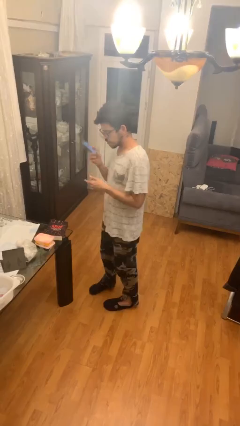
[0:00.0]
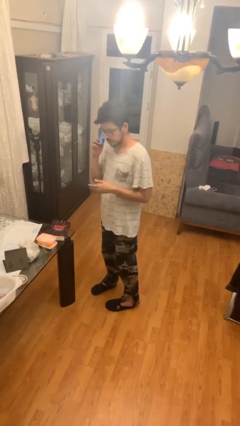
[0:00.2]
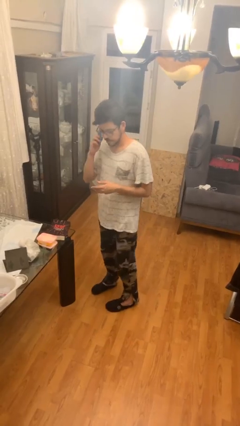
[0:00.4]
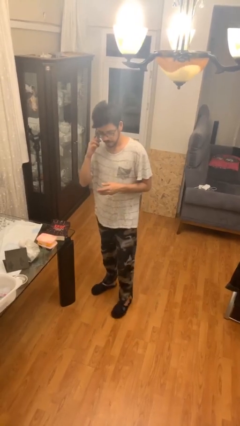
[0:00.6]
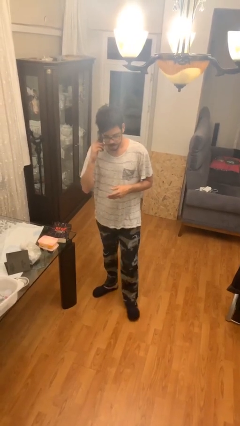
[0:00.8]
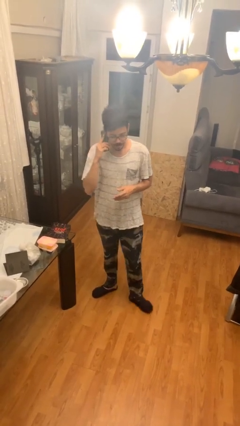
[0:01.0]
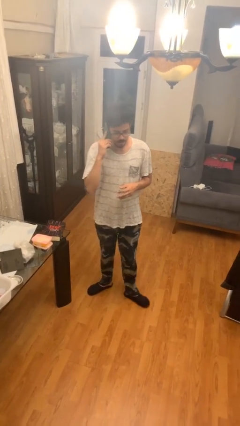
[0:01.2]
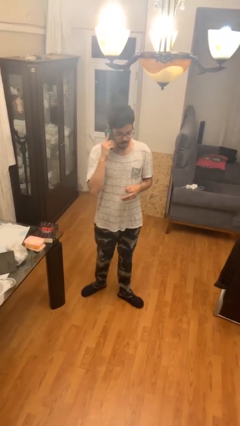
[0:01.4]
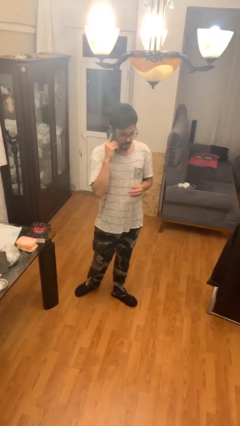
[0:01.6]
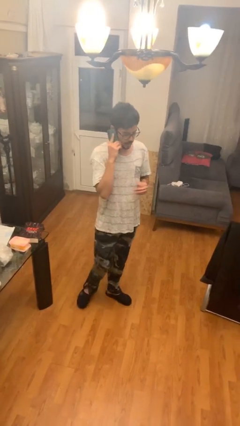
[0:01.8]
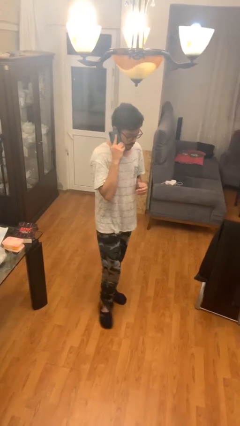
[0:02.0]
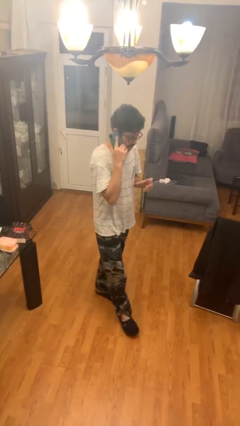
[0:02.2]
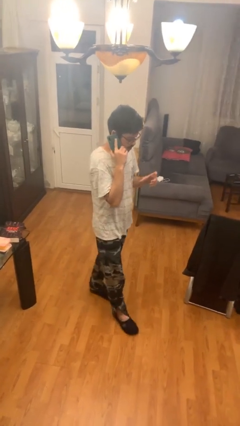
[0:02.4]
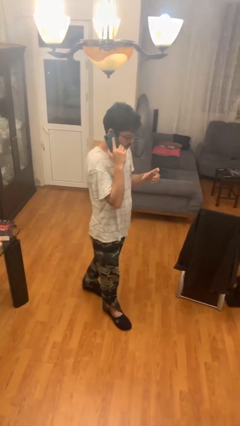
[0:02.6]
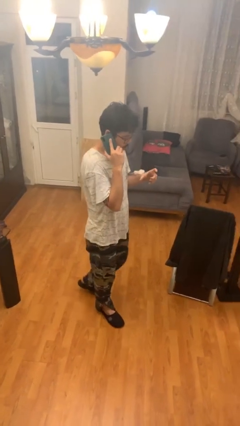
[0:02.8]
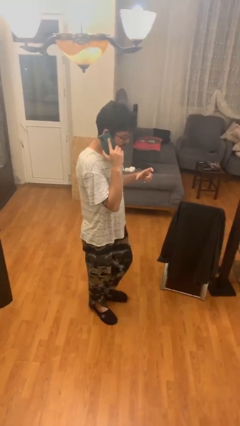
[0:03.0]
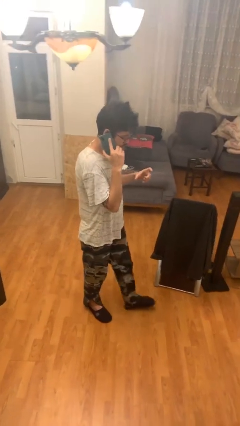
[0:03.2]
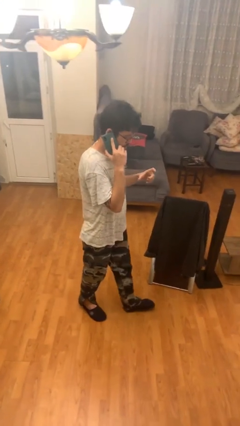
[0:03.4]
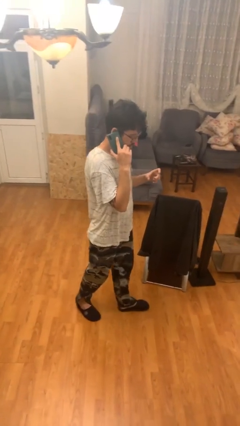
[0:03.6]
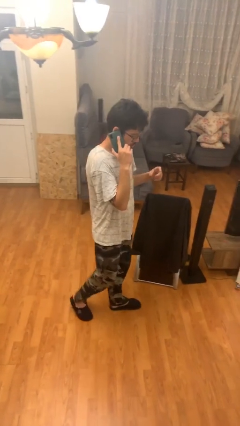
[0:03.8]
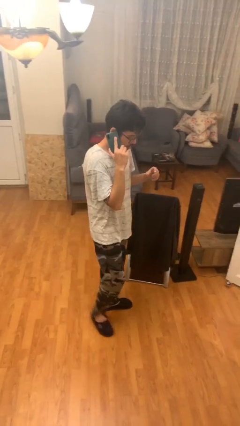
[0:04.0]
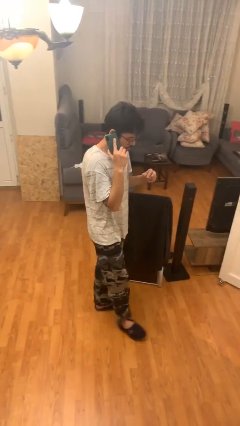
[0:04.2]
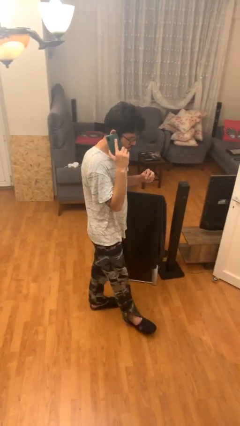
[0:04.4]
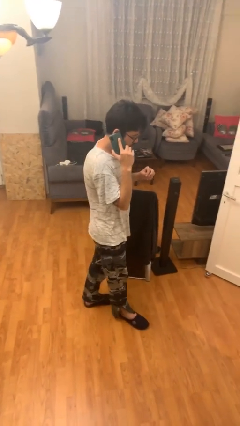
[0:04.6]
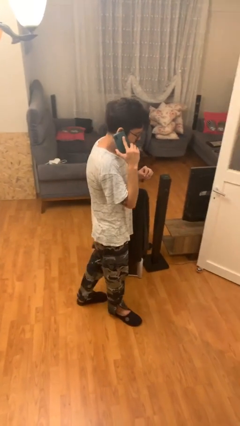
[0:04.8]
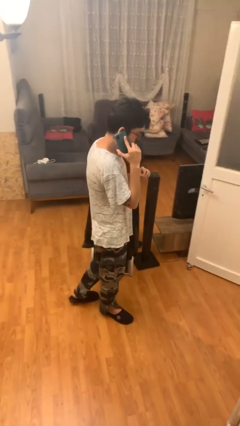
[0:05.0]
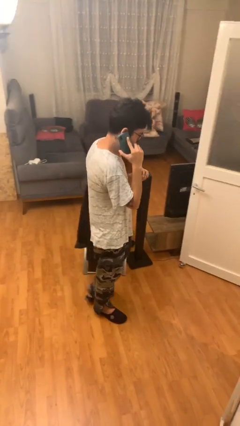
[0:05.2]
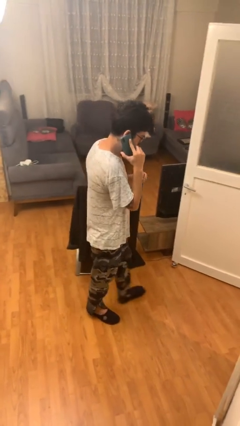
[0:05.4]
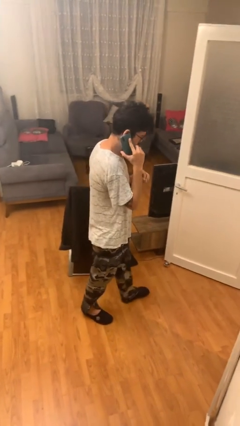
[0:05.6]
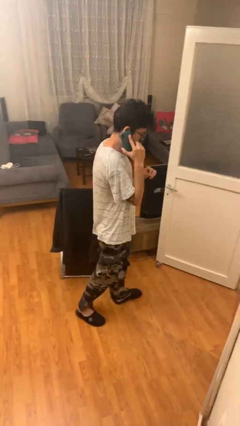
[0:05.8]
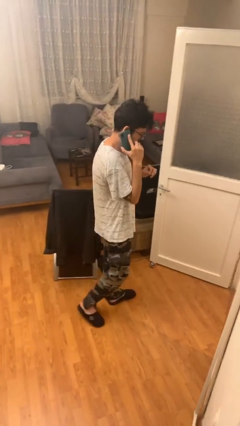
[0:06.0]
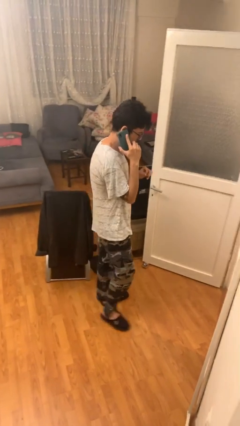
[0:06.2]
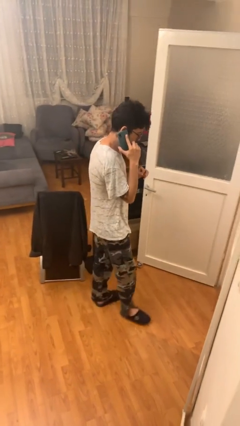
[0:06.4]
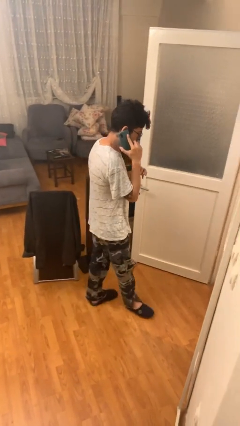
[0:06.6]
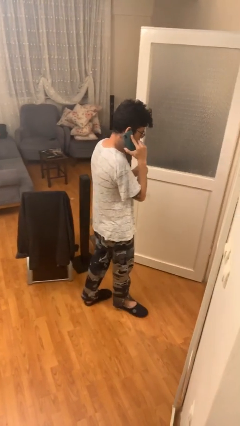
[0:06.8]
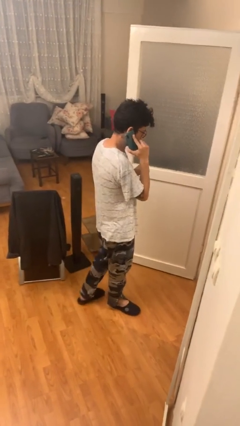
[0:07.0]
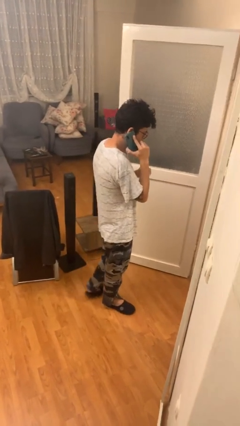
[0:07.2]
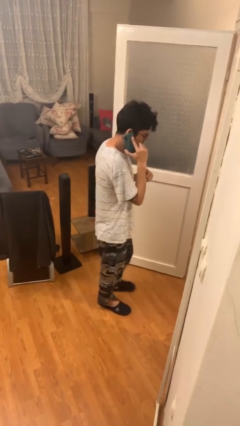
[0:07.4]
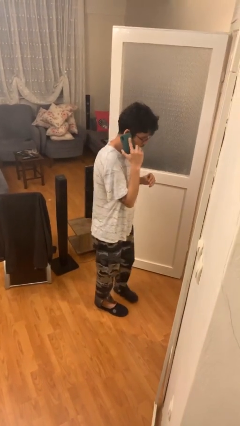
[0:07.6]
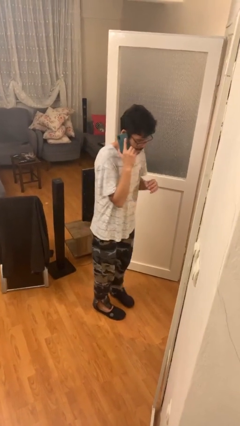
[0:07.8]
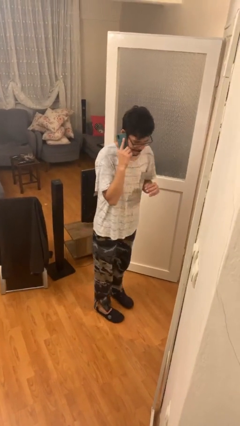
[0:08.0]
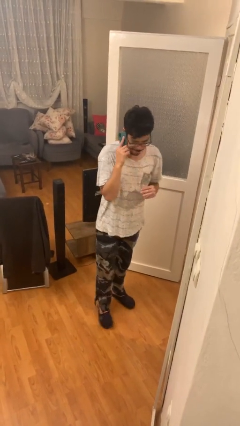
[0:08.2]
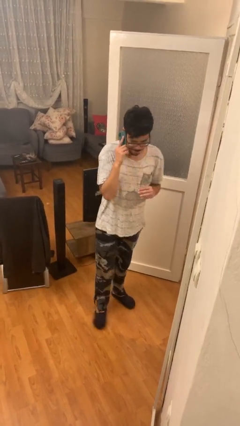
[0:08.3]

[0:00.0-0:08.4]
person talks on phone

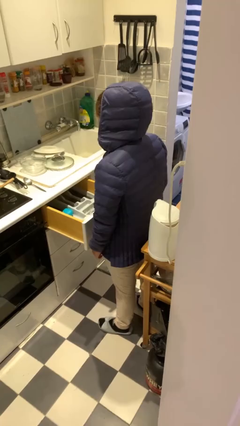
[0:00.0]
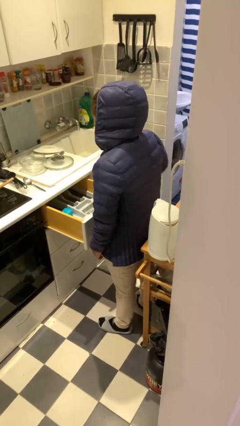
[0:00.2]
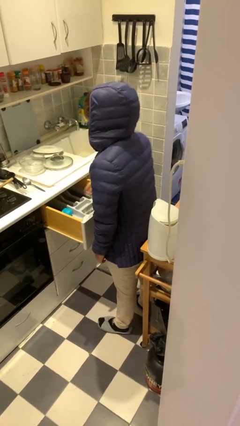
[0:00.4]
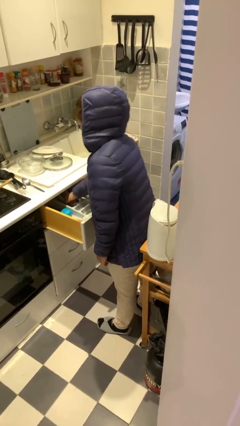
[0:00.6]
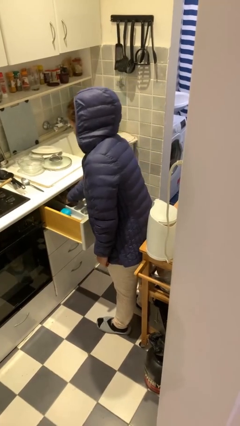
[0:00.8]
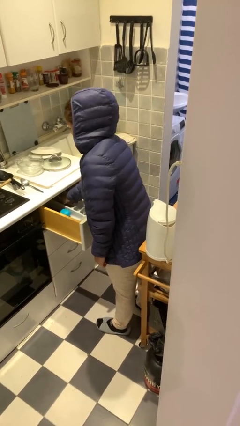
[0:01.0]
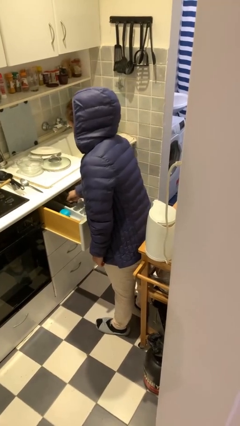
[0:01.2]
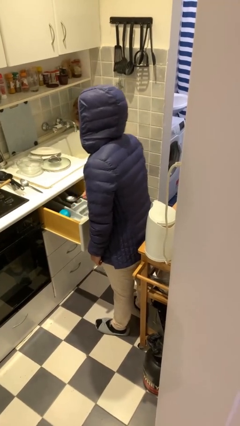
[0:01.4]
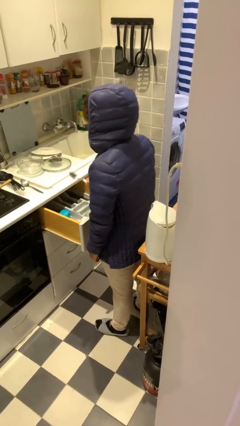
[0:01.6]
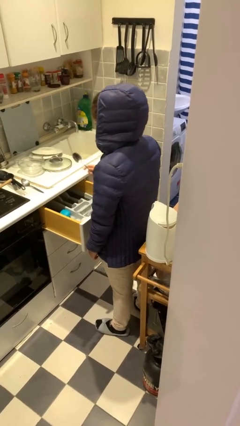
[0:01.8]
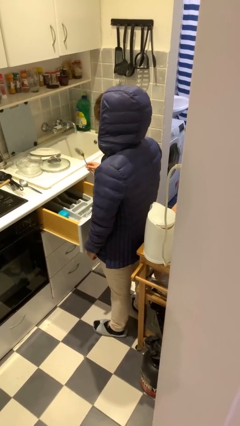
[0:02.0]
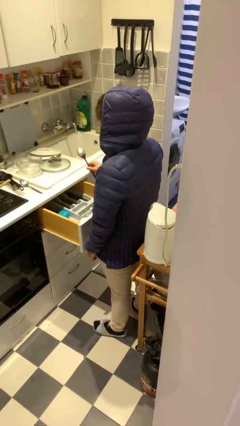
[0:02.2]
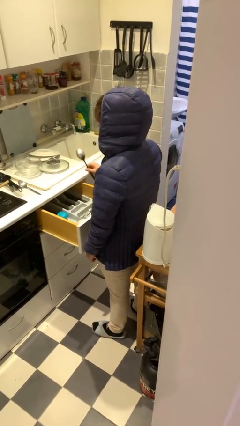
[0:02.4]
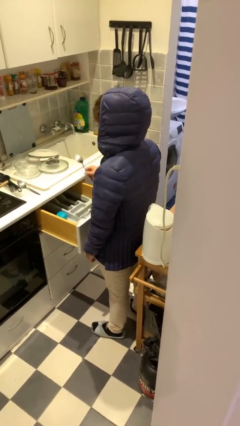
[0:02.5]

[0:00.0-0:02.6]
person takes object from kitchen drawer

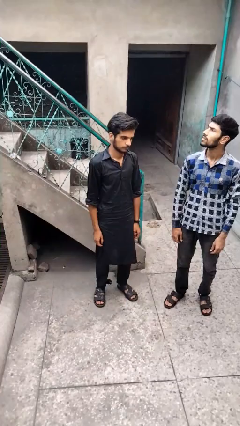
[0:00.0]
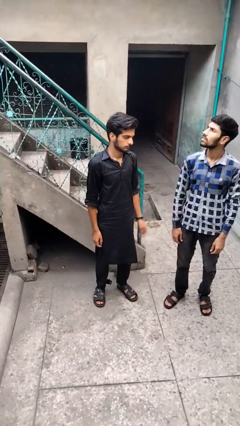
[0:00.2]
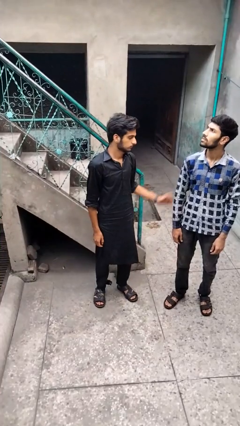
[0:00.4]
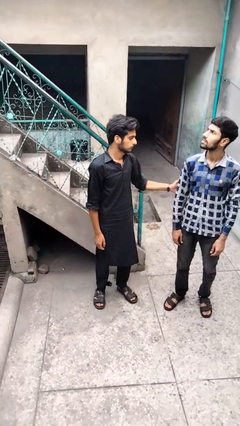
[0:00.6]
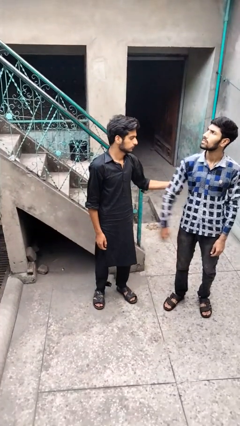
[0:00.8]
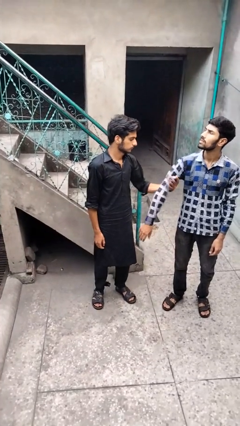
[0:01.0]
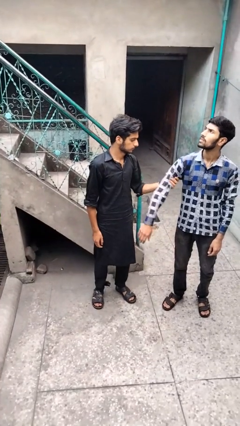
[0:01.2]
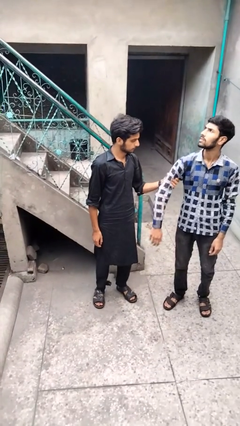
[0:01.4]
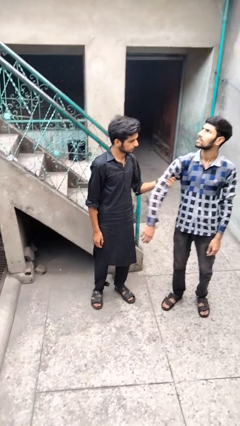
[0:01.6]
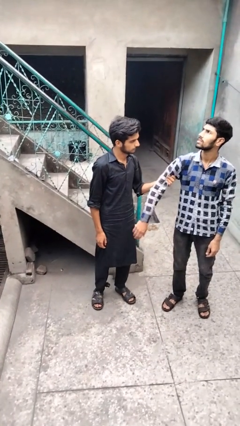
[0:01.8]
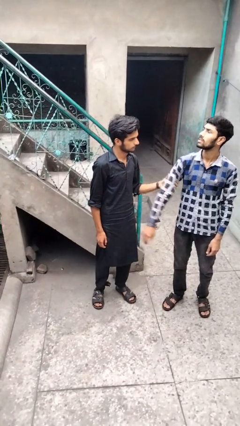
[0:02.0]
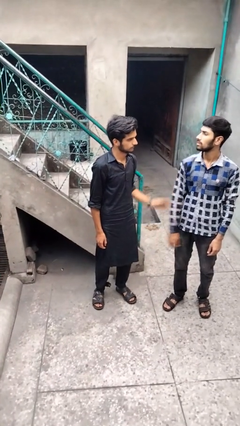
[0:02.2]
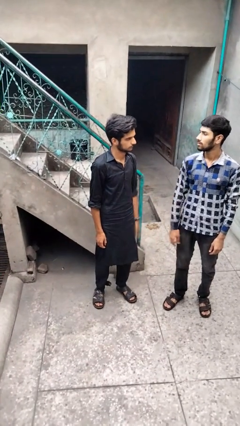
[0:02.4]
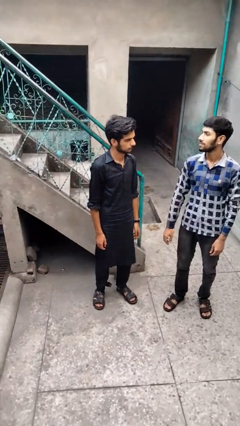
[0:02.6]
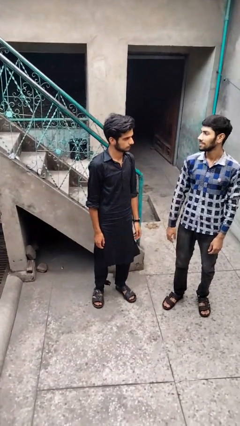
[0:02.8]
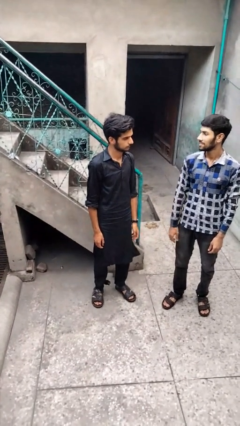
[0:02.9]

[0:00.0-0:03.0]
person grabs person by bicep

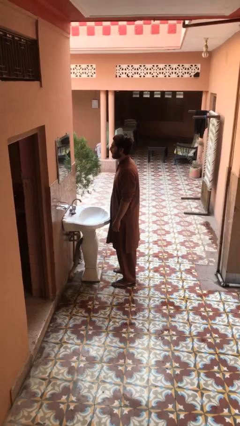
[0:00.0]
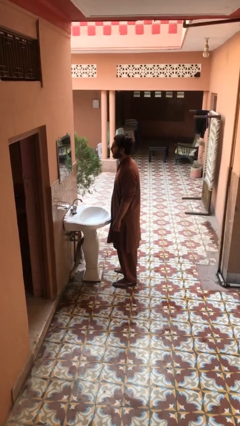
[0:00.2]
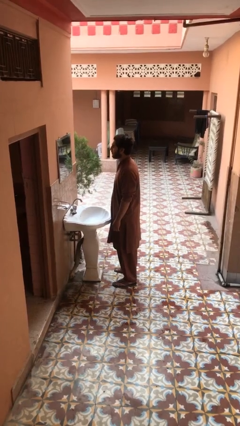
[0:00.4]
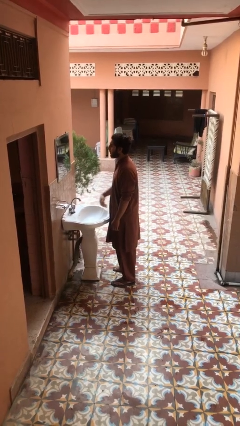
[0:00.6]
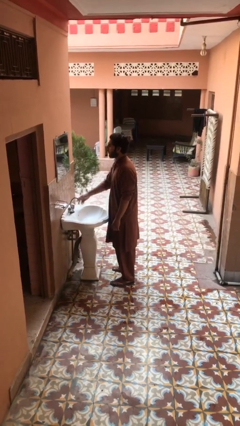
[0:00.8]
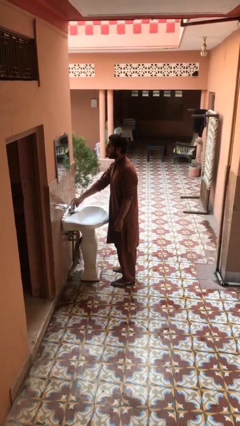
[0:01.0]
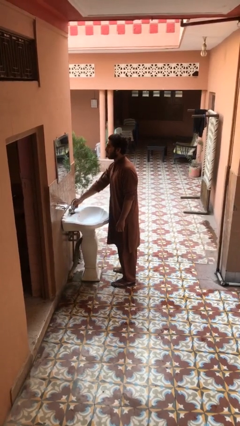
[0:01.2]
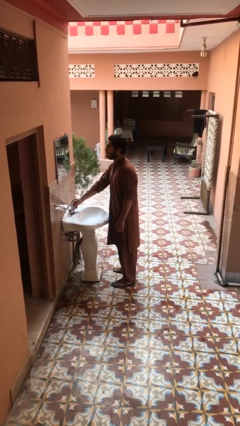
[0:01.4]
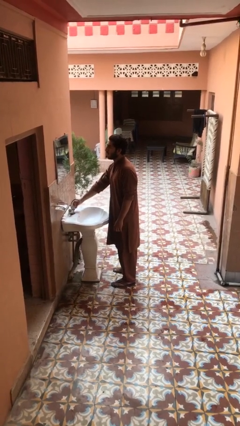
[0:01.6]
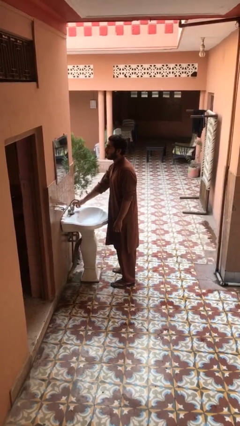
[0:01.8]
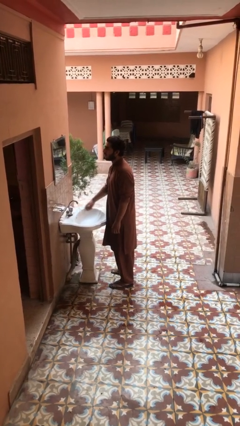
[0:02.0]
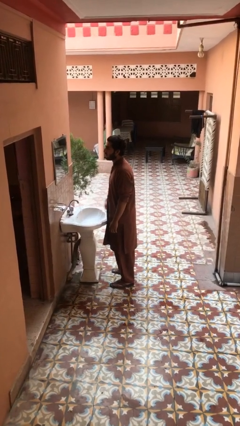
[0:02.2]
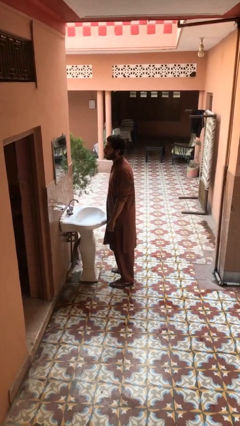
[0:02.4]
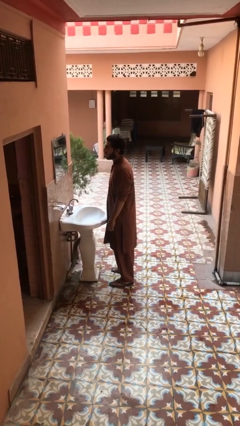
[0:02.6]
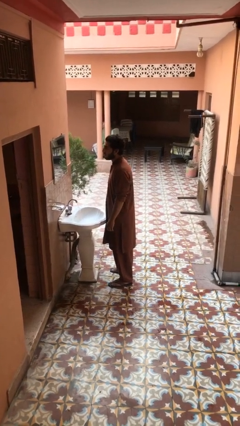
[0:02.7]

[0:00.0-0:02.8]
person turns on faucet

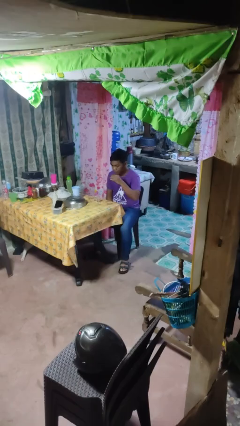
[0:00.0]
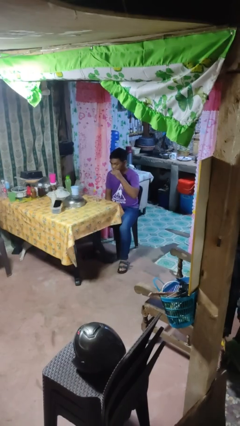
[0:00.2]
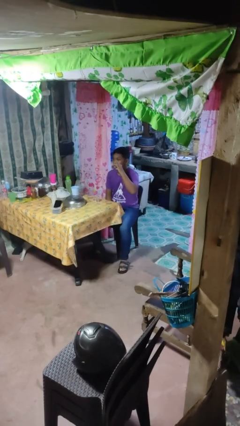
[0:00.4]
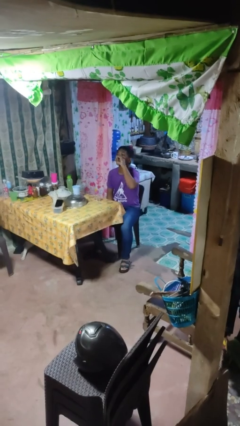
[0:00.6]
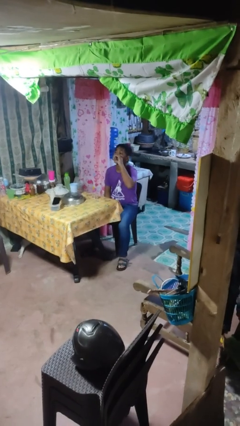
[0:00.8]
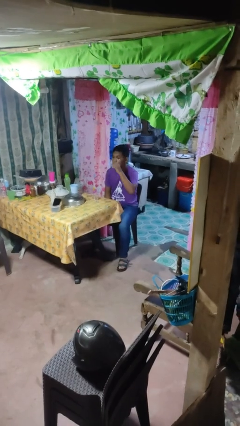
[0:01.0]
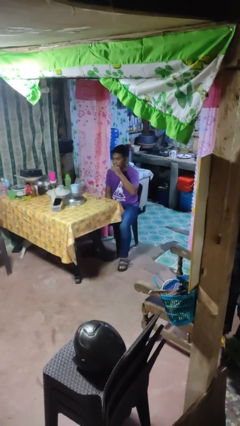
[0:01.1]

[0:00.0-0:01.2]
person drinks from shotglass
